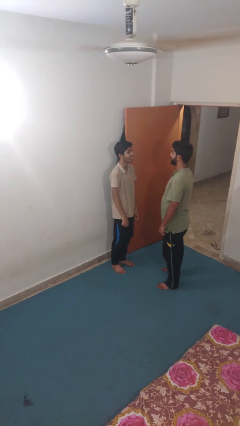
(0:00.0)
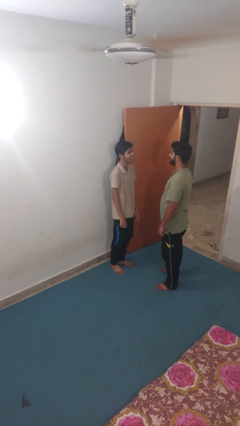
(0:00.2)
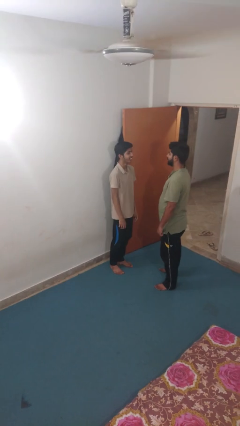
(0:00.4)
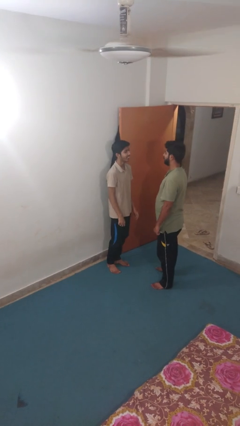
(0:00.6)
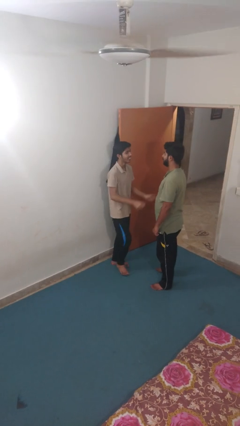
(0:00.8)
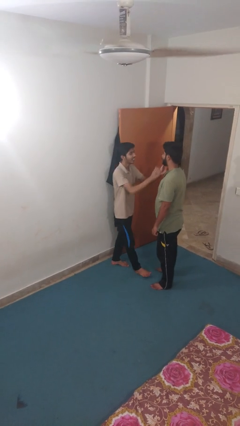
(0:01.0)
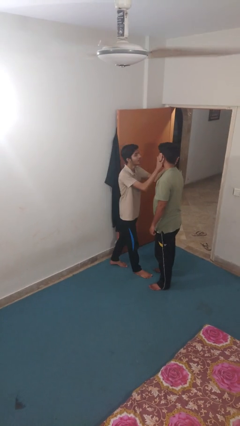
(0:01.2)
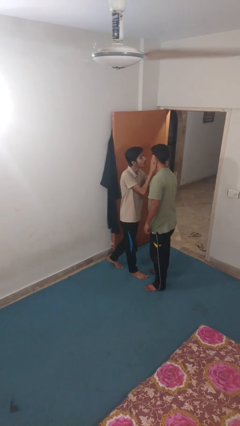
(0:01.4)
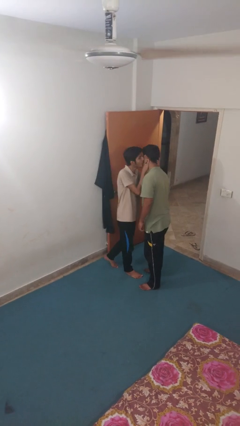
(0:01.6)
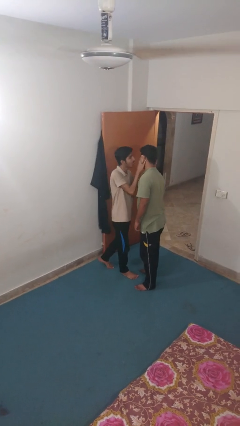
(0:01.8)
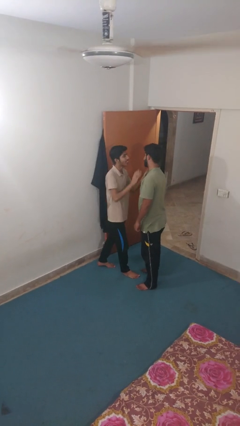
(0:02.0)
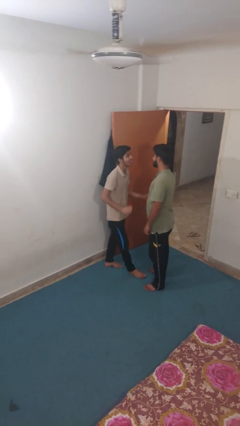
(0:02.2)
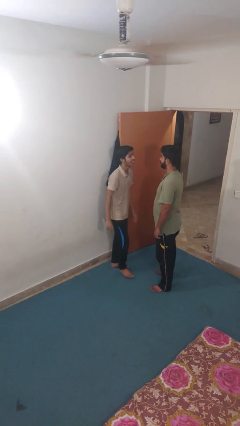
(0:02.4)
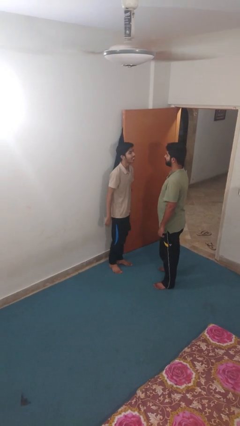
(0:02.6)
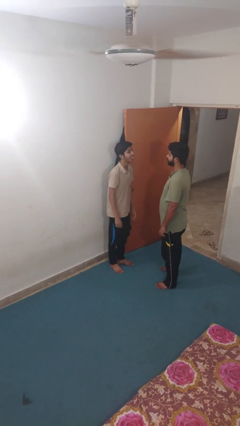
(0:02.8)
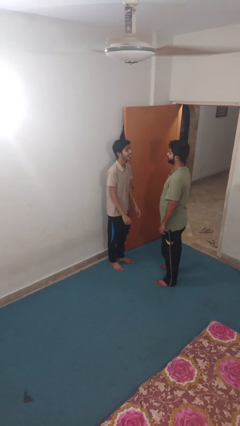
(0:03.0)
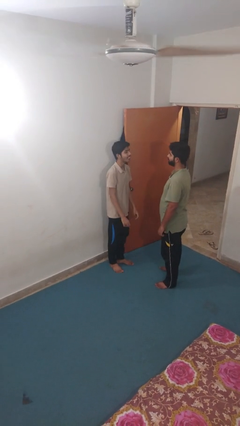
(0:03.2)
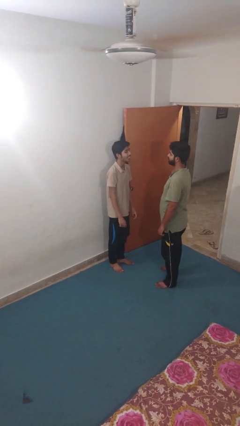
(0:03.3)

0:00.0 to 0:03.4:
person kisses cheek of person

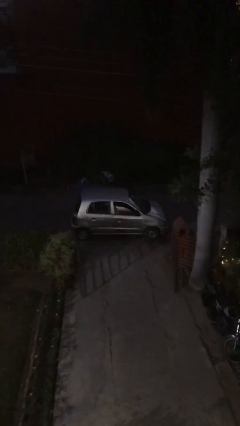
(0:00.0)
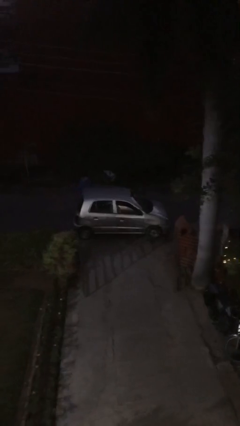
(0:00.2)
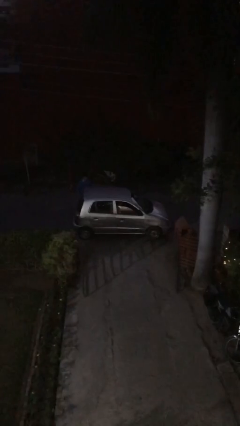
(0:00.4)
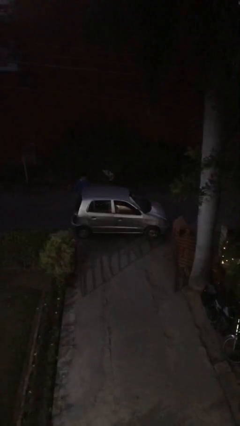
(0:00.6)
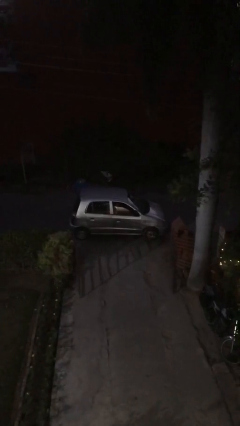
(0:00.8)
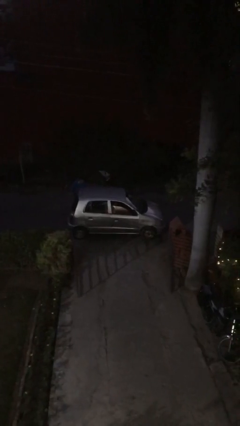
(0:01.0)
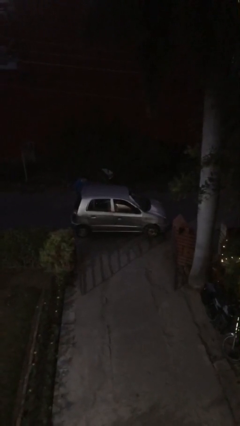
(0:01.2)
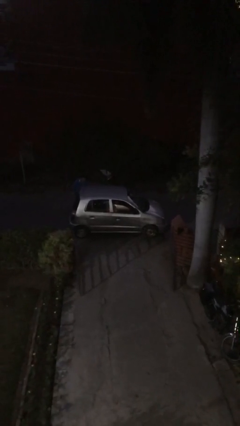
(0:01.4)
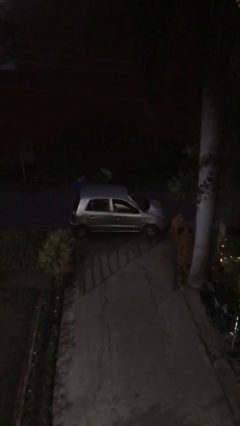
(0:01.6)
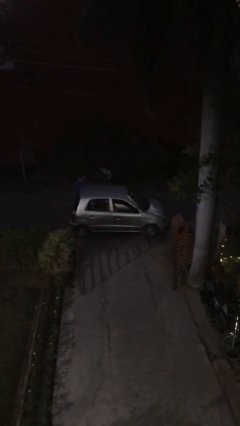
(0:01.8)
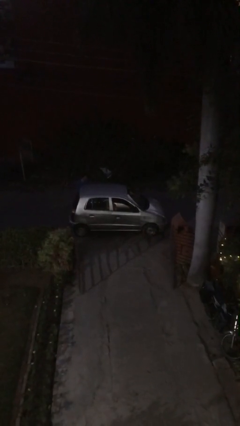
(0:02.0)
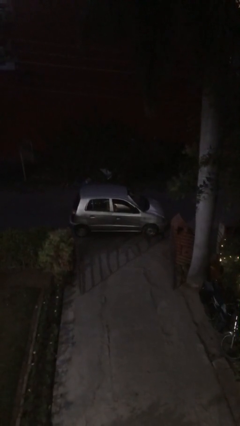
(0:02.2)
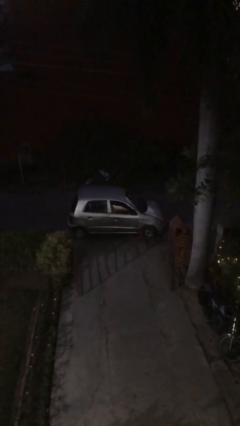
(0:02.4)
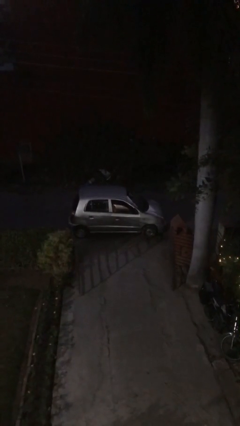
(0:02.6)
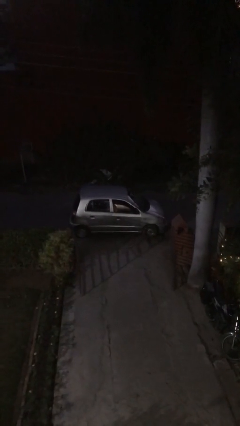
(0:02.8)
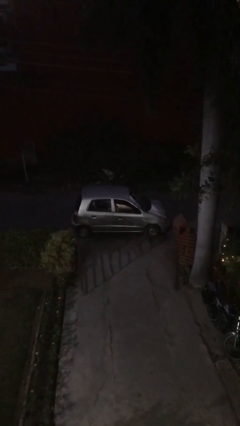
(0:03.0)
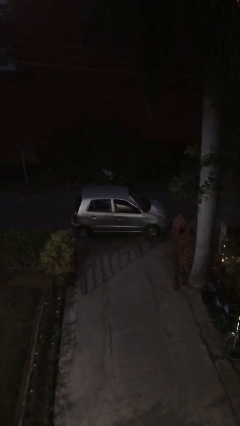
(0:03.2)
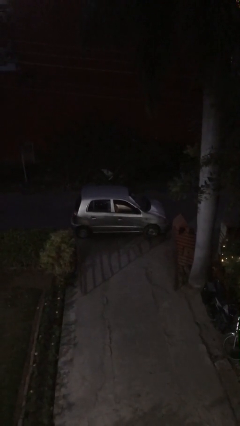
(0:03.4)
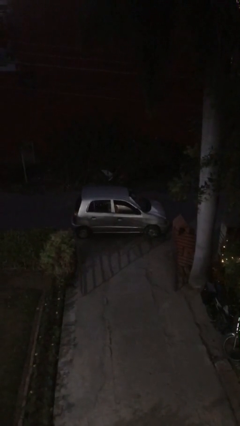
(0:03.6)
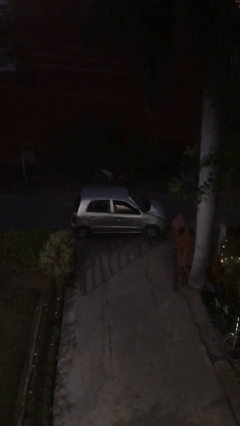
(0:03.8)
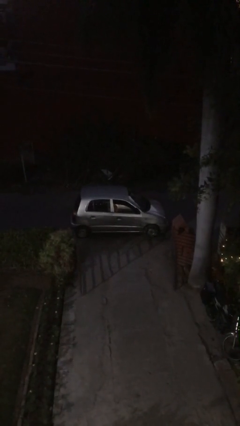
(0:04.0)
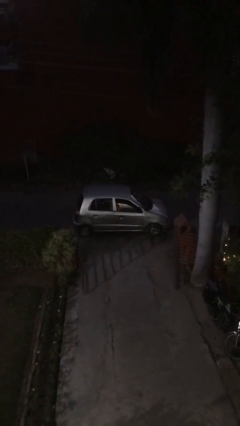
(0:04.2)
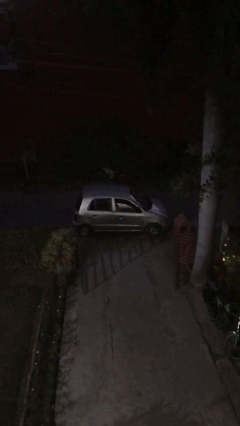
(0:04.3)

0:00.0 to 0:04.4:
car picks up person

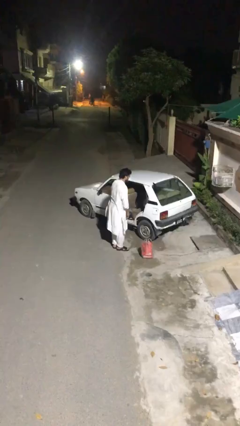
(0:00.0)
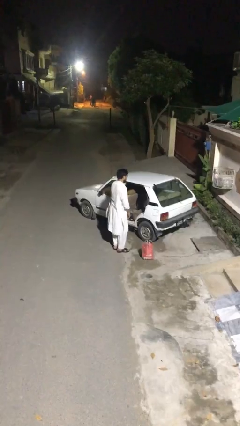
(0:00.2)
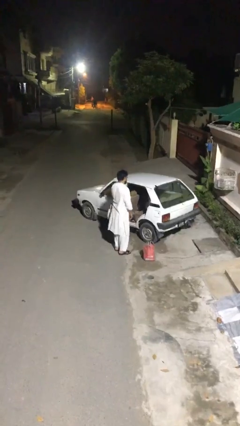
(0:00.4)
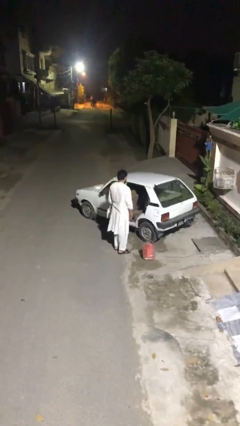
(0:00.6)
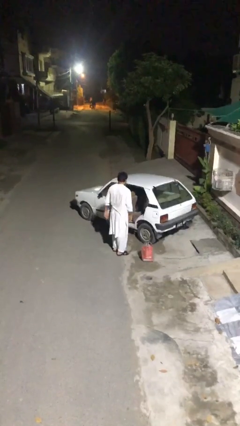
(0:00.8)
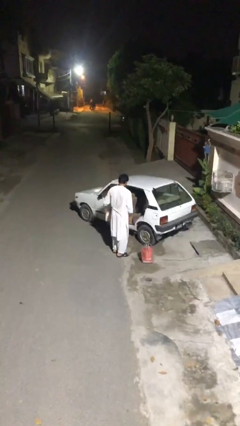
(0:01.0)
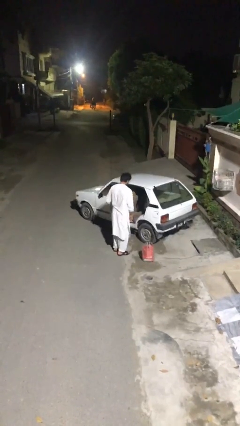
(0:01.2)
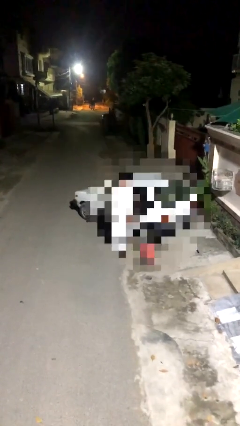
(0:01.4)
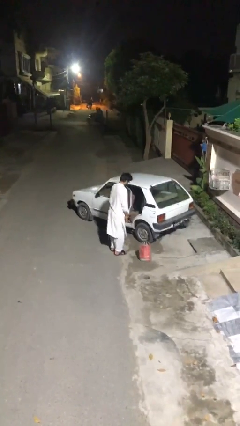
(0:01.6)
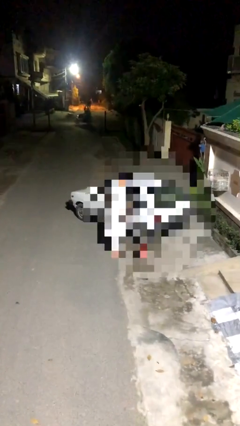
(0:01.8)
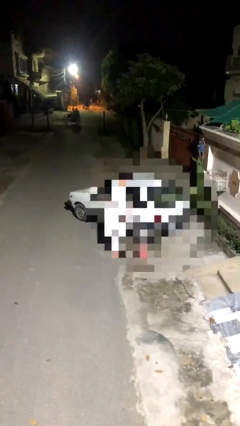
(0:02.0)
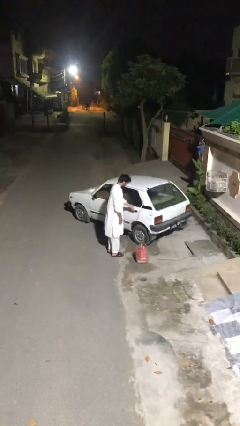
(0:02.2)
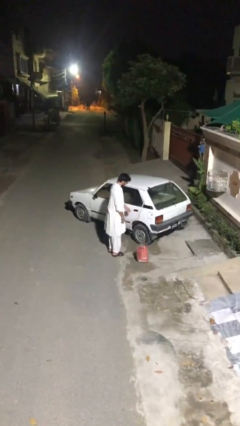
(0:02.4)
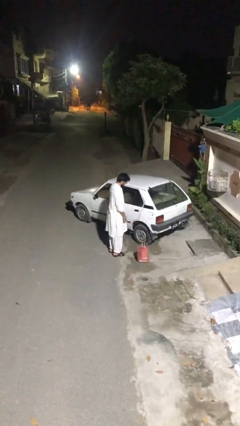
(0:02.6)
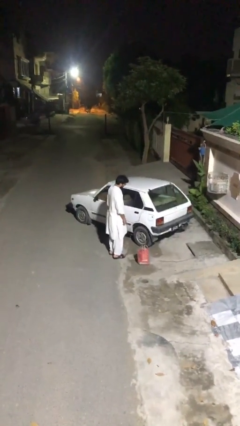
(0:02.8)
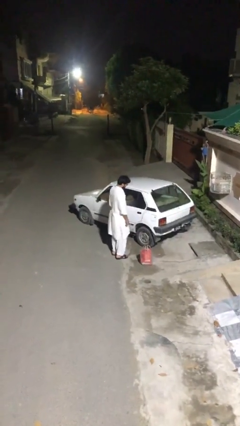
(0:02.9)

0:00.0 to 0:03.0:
person closes car door

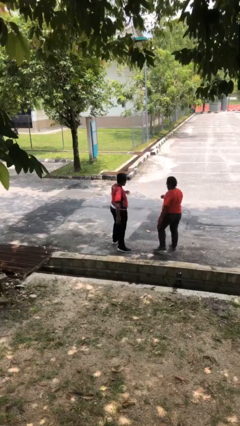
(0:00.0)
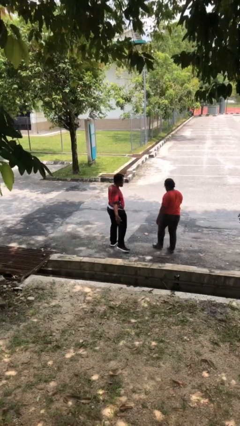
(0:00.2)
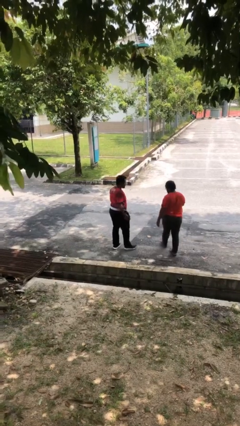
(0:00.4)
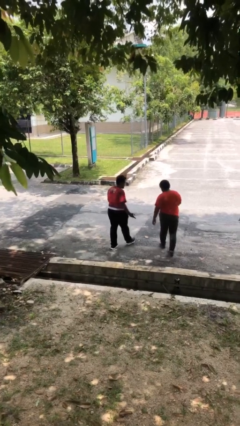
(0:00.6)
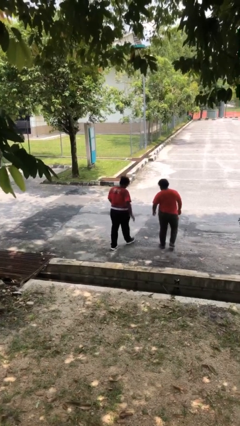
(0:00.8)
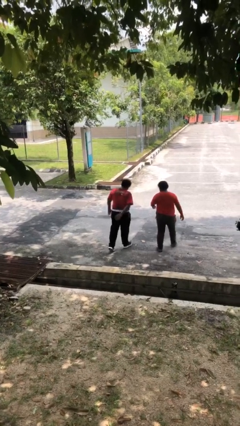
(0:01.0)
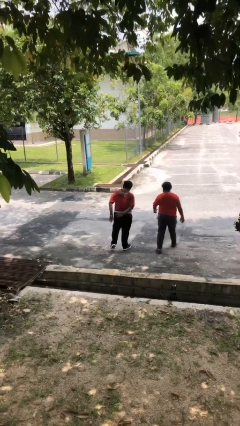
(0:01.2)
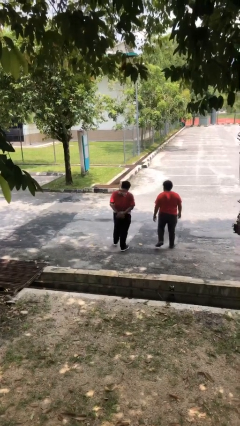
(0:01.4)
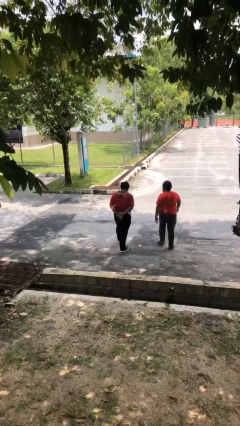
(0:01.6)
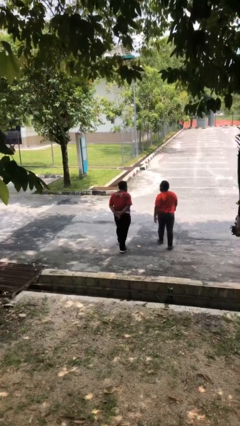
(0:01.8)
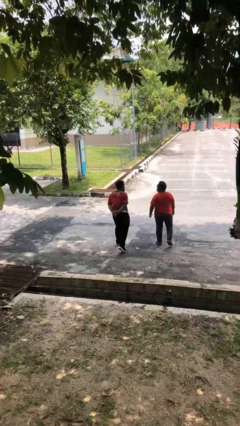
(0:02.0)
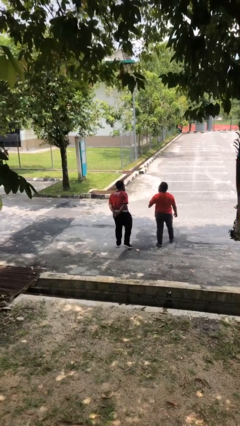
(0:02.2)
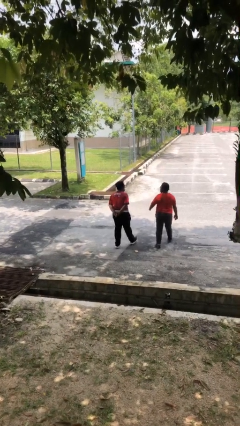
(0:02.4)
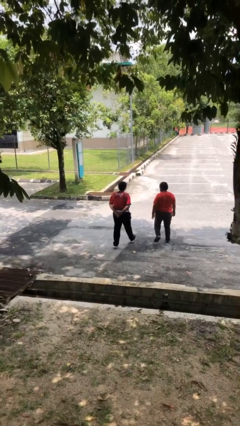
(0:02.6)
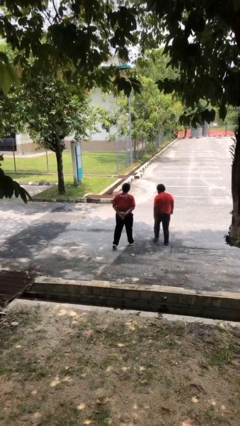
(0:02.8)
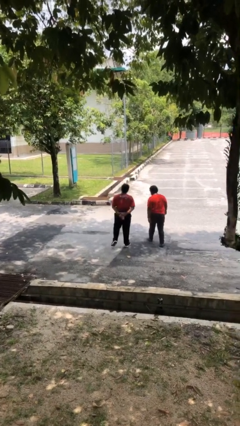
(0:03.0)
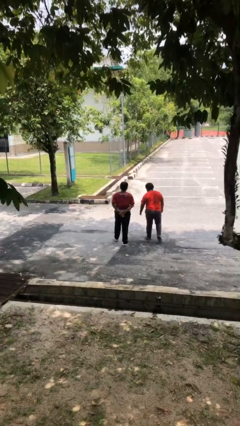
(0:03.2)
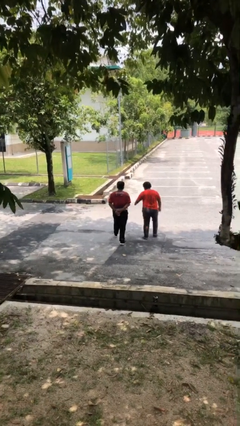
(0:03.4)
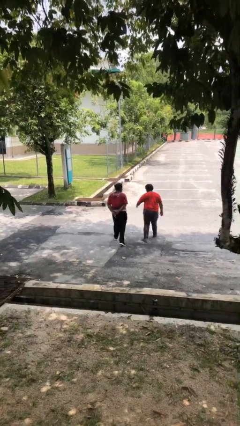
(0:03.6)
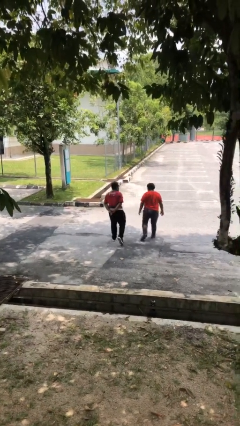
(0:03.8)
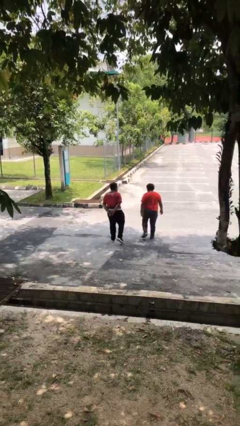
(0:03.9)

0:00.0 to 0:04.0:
person talks to person

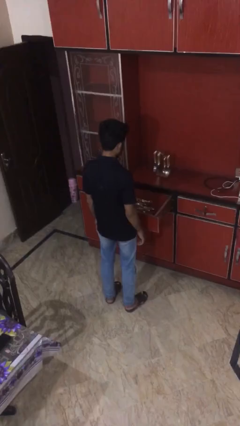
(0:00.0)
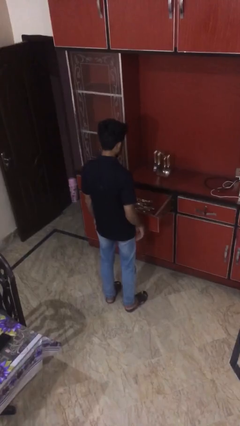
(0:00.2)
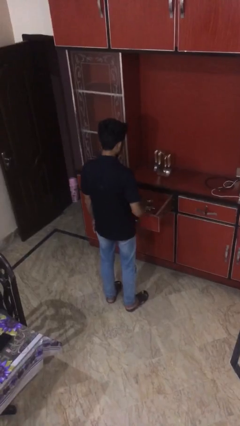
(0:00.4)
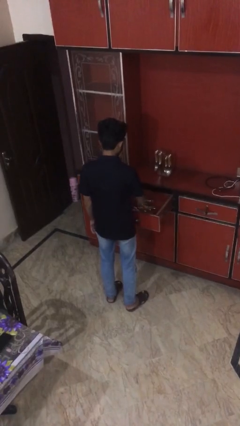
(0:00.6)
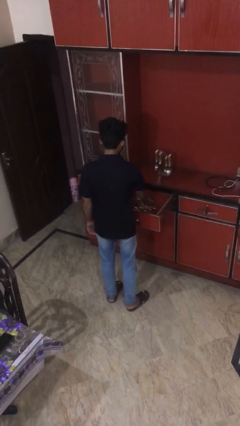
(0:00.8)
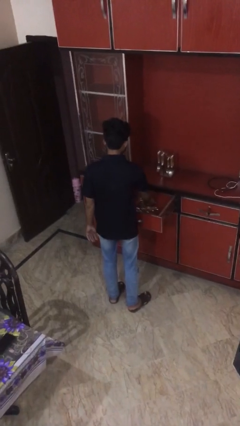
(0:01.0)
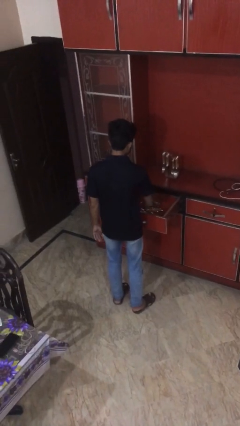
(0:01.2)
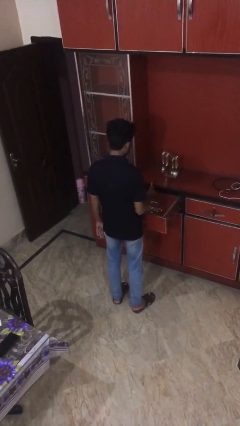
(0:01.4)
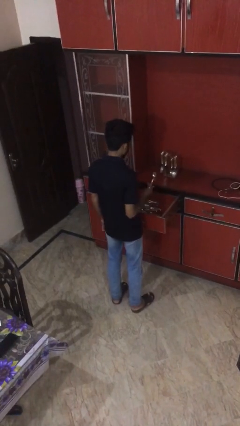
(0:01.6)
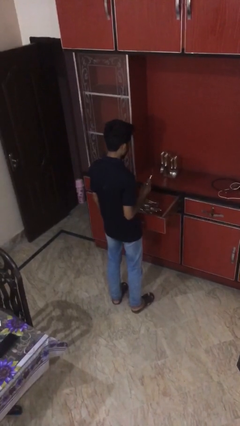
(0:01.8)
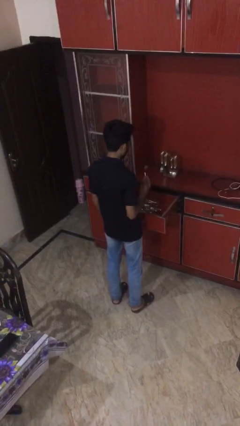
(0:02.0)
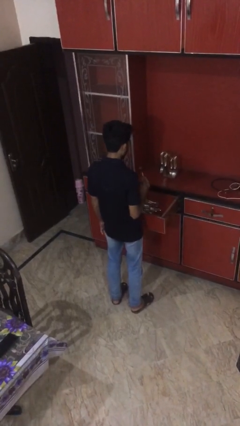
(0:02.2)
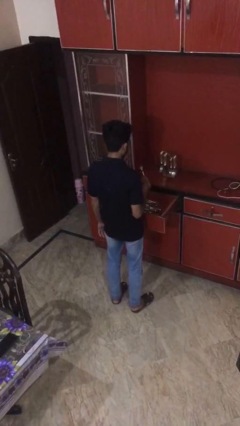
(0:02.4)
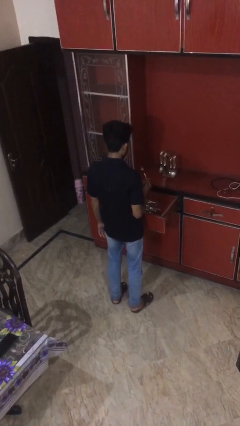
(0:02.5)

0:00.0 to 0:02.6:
person takes object from kitchen drawer
